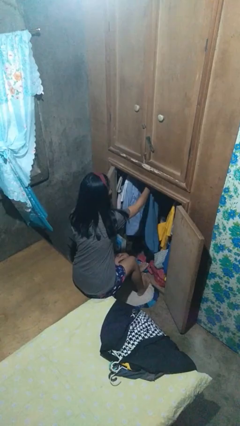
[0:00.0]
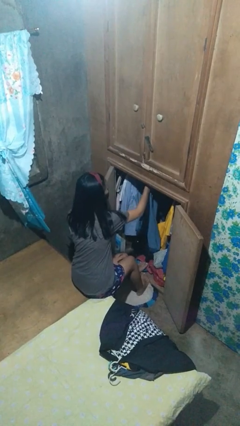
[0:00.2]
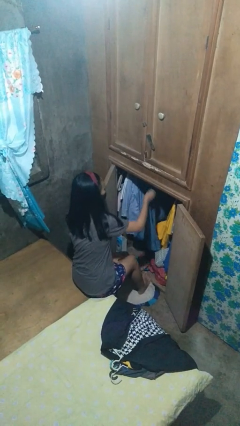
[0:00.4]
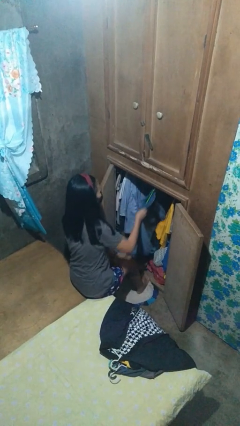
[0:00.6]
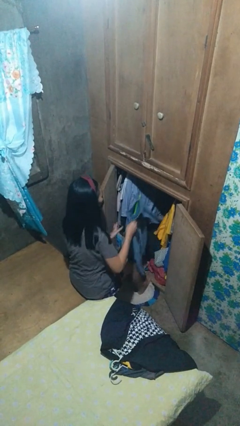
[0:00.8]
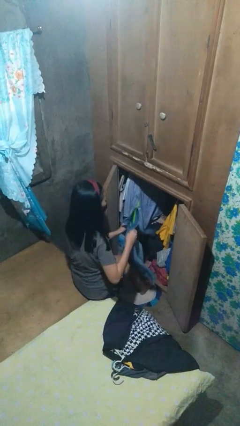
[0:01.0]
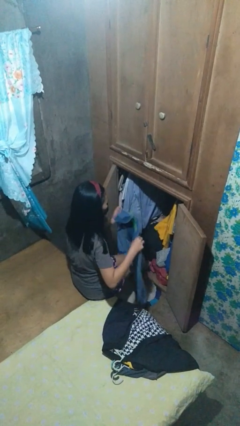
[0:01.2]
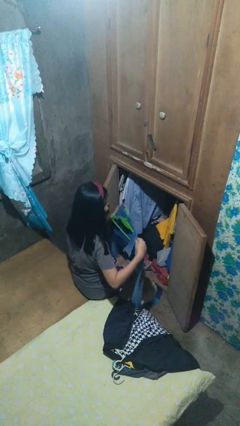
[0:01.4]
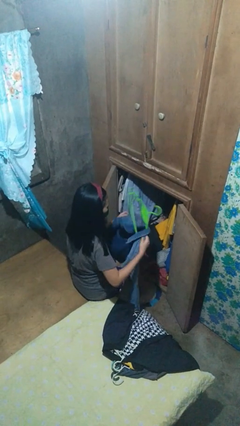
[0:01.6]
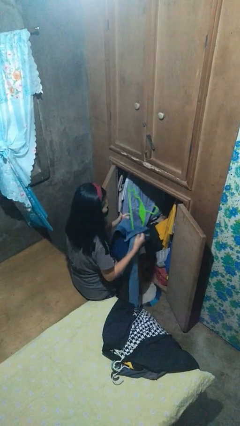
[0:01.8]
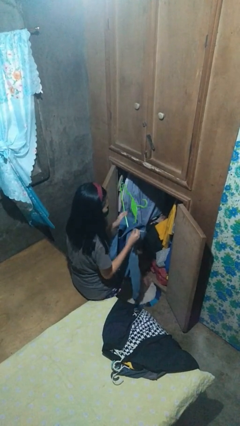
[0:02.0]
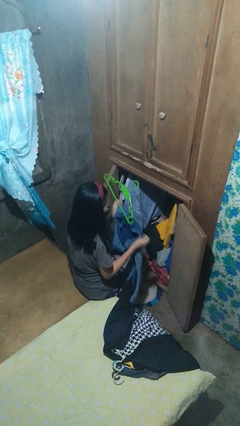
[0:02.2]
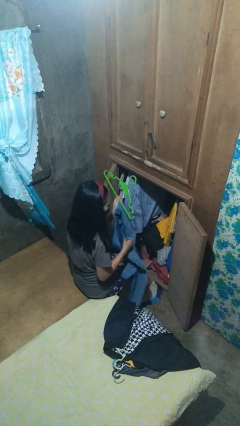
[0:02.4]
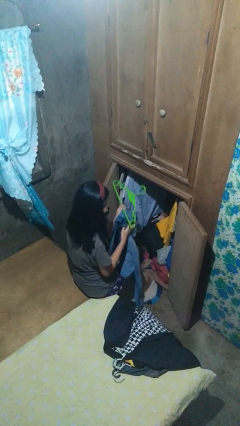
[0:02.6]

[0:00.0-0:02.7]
person takes clothes from closet

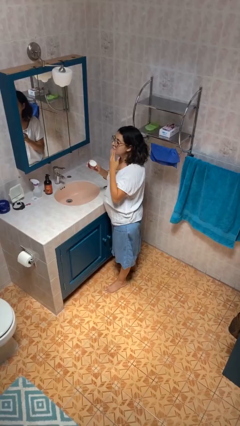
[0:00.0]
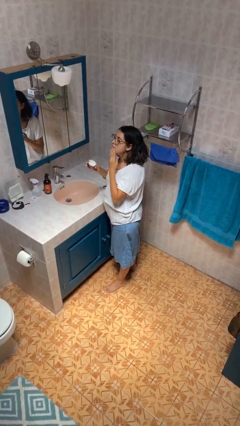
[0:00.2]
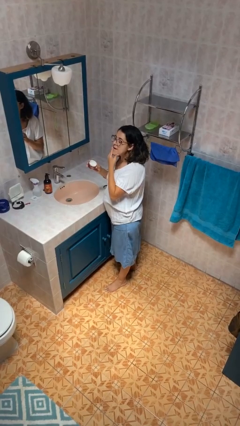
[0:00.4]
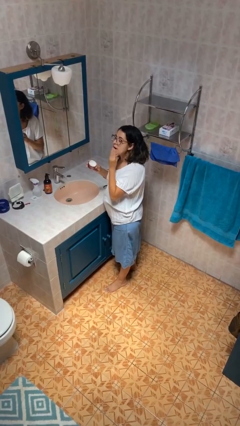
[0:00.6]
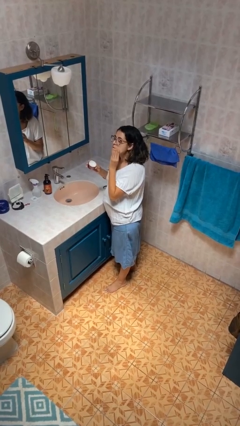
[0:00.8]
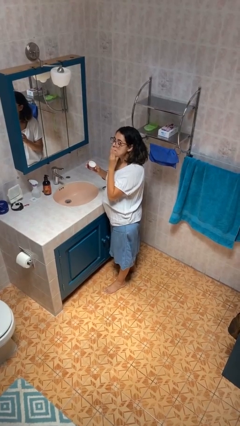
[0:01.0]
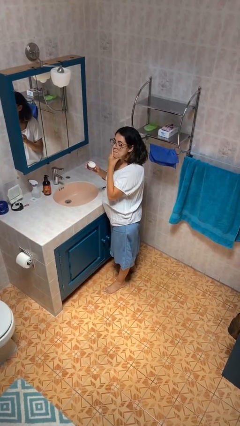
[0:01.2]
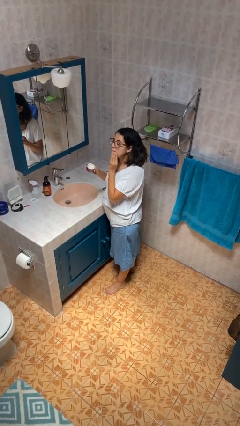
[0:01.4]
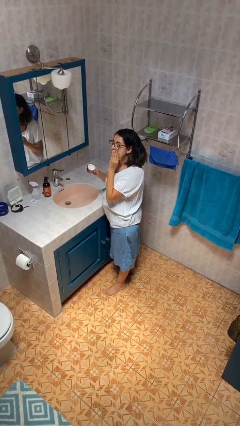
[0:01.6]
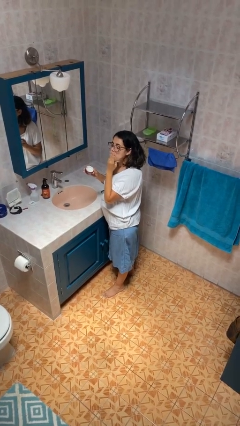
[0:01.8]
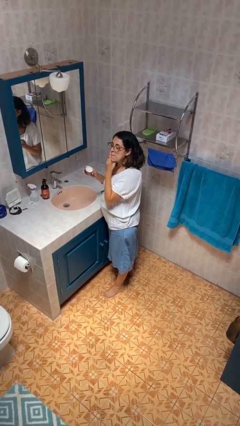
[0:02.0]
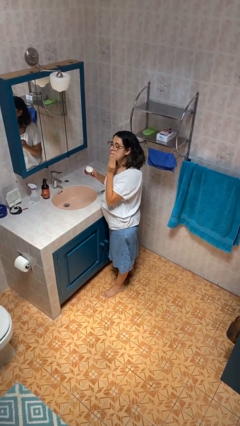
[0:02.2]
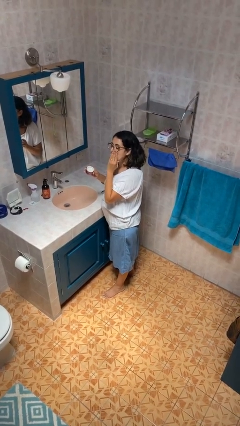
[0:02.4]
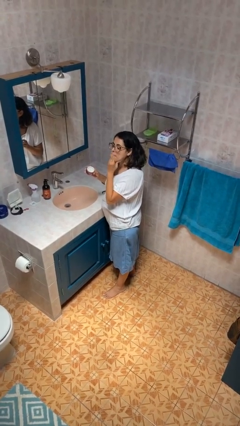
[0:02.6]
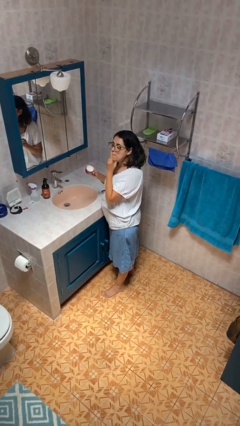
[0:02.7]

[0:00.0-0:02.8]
person applies facial moisturizer

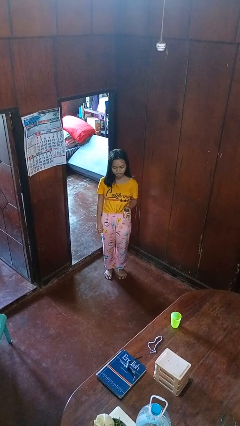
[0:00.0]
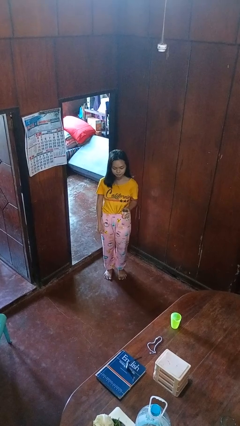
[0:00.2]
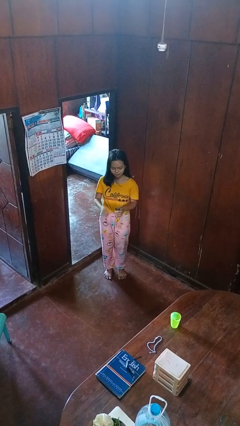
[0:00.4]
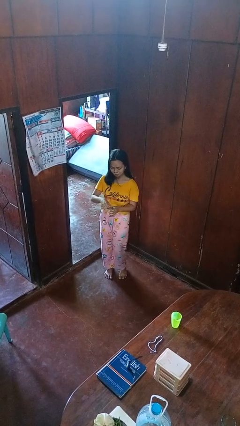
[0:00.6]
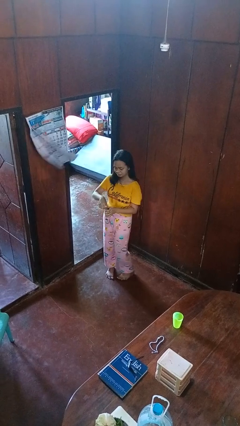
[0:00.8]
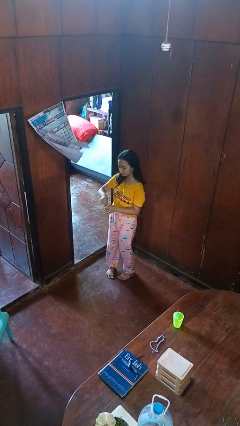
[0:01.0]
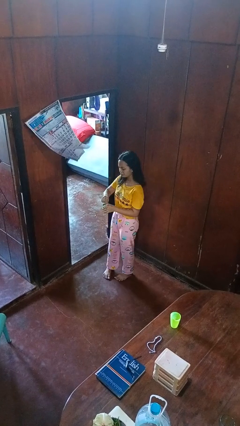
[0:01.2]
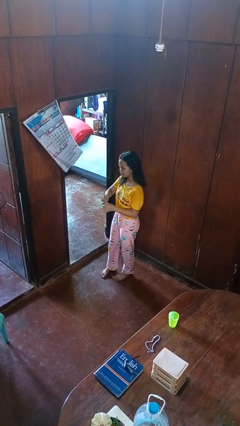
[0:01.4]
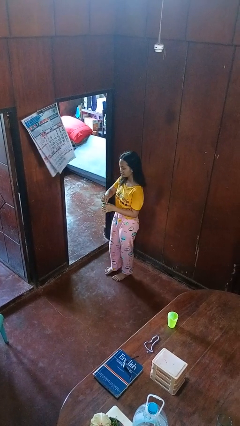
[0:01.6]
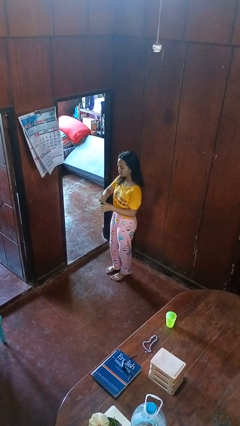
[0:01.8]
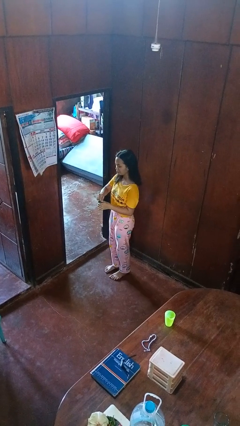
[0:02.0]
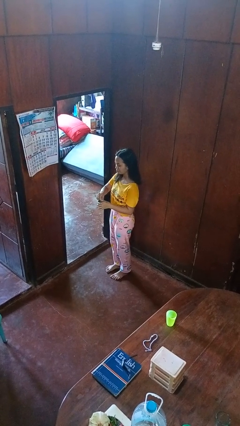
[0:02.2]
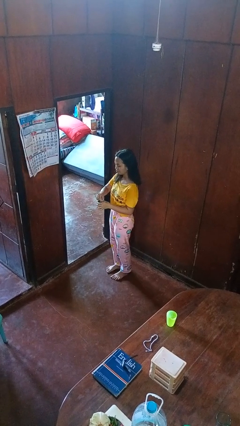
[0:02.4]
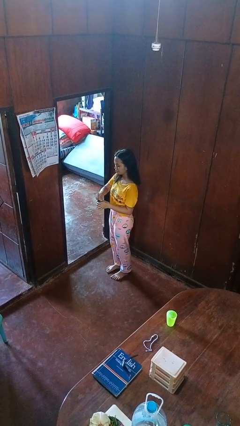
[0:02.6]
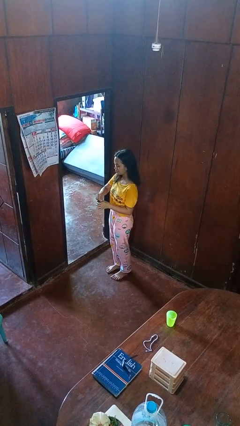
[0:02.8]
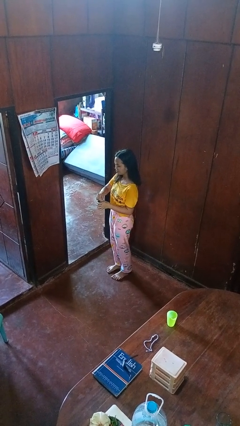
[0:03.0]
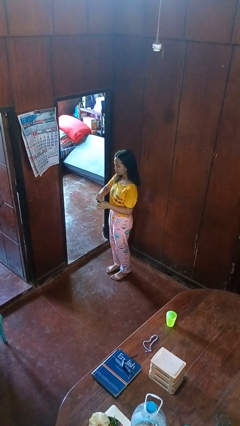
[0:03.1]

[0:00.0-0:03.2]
person opens beverage can

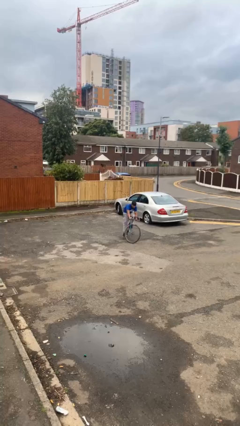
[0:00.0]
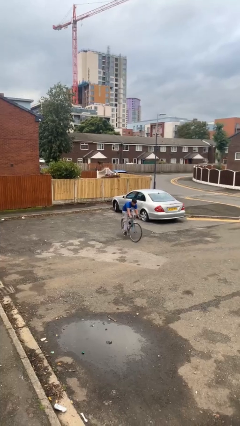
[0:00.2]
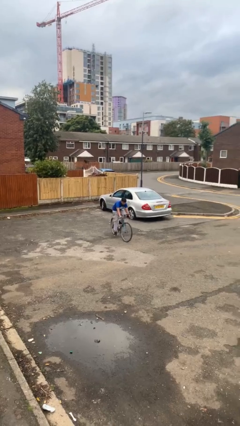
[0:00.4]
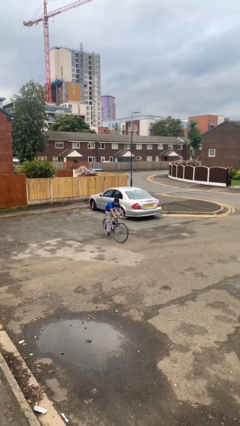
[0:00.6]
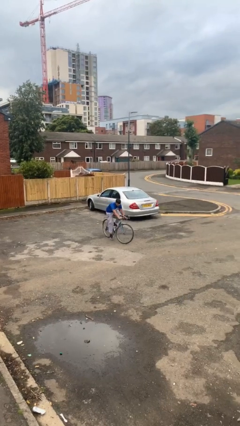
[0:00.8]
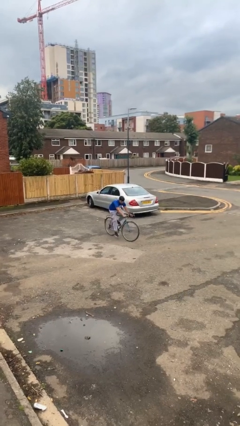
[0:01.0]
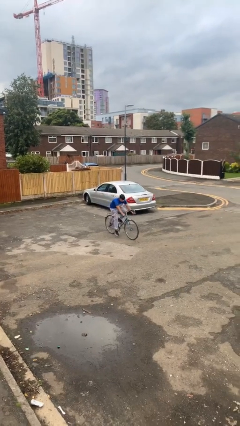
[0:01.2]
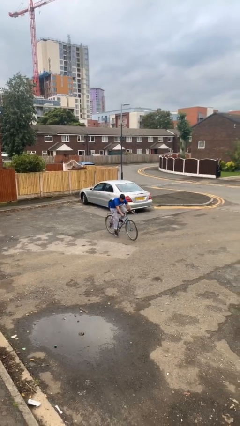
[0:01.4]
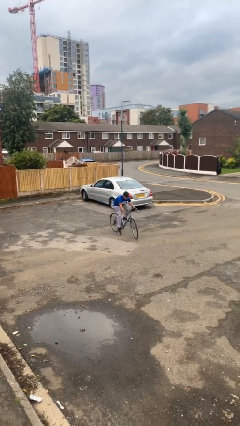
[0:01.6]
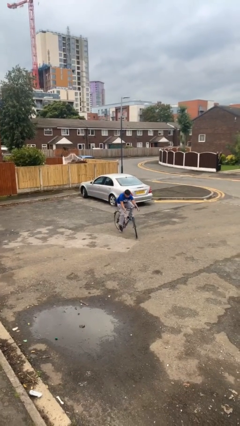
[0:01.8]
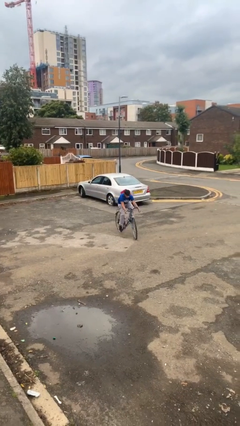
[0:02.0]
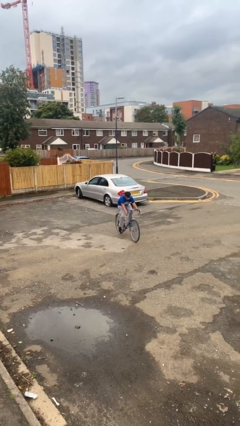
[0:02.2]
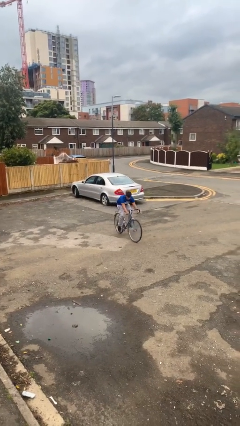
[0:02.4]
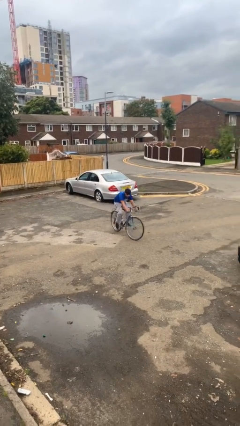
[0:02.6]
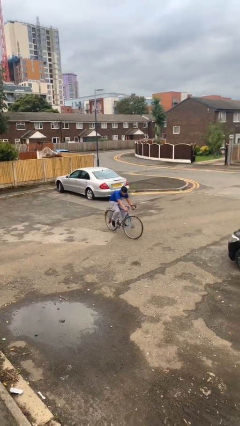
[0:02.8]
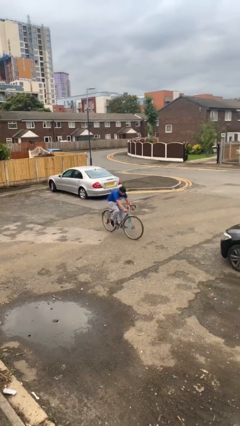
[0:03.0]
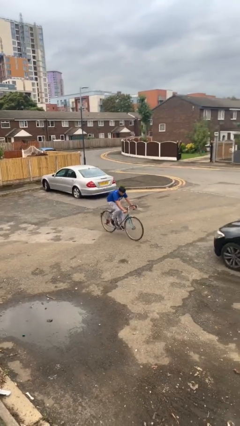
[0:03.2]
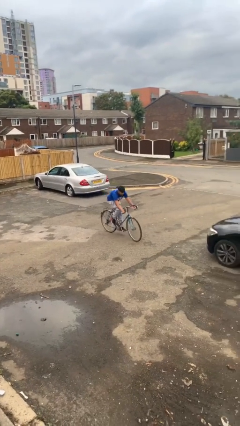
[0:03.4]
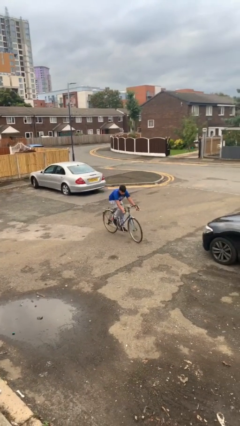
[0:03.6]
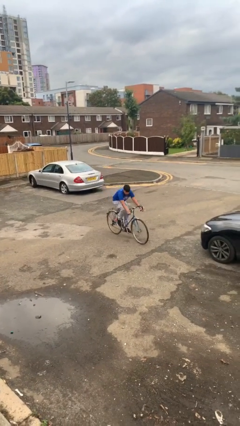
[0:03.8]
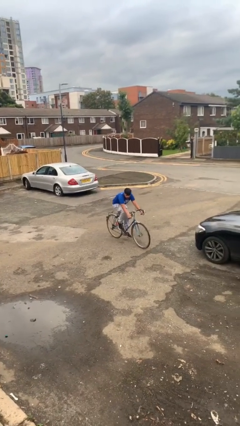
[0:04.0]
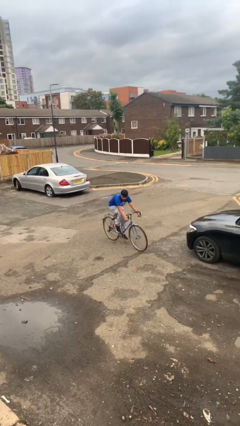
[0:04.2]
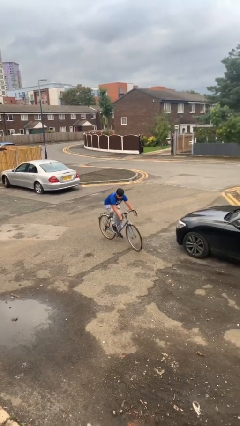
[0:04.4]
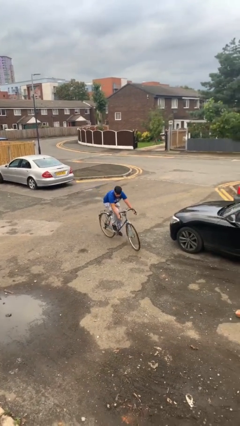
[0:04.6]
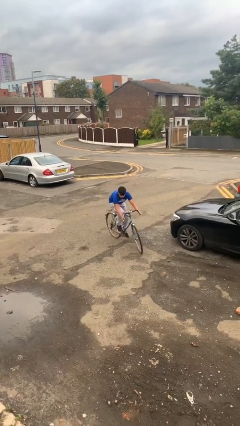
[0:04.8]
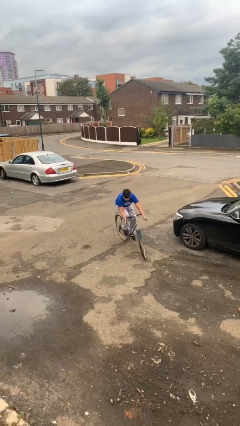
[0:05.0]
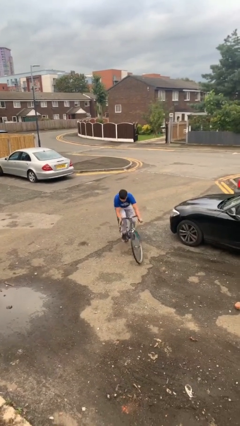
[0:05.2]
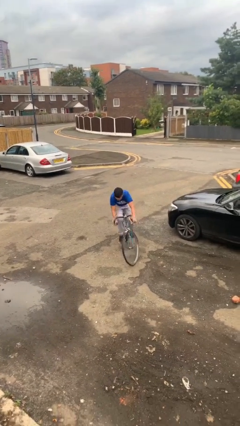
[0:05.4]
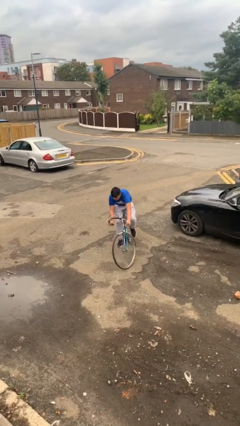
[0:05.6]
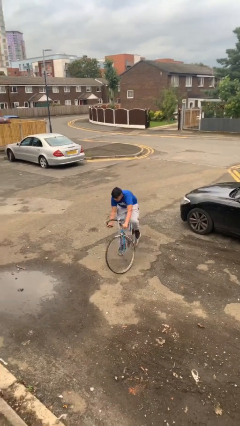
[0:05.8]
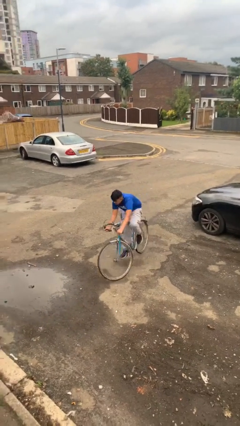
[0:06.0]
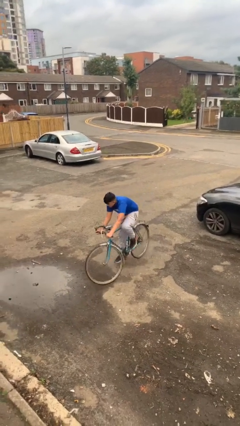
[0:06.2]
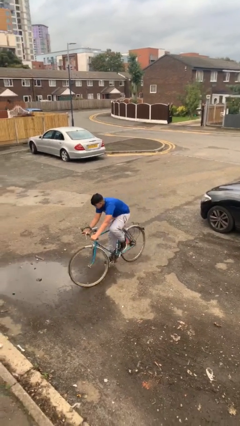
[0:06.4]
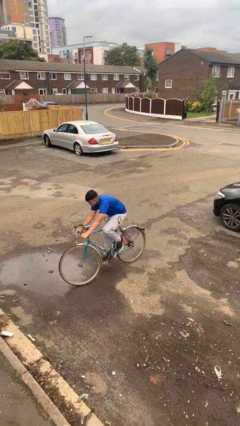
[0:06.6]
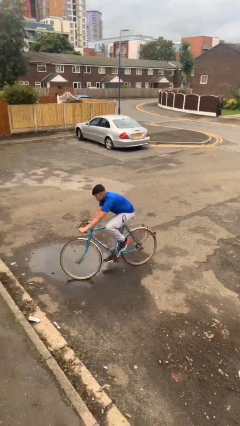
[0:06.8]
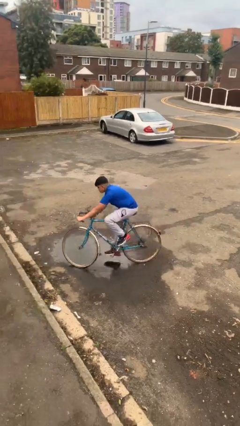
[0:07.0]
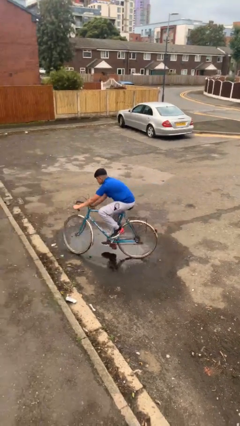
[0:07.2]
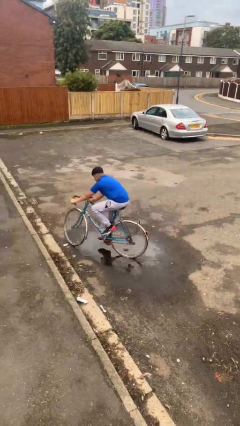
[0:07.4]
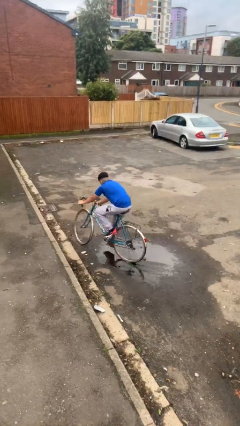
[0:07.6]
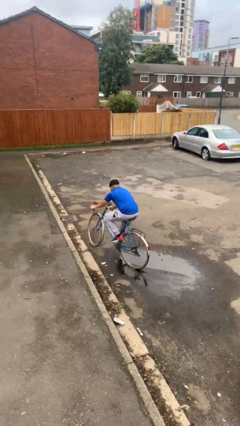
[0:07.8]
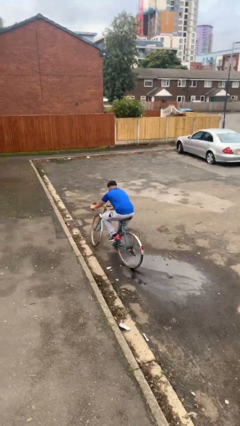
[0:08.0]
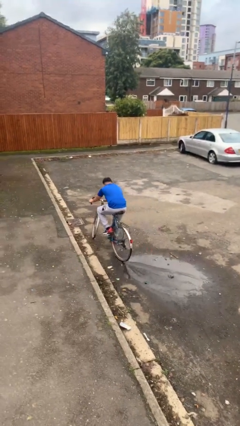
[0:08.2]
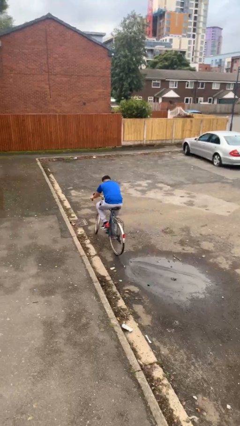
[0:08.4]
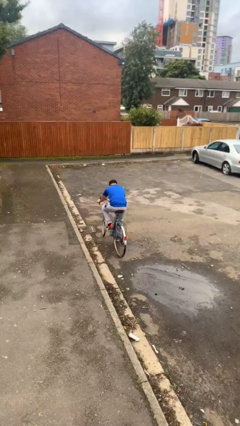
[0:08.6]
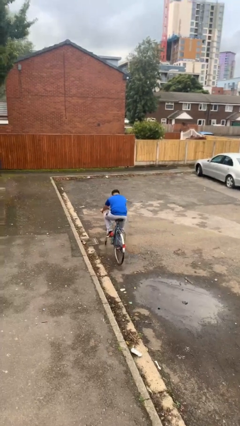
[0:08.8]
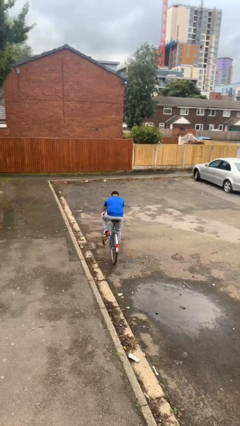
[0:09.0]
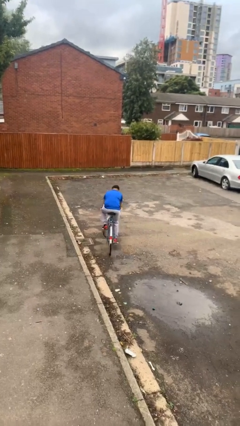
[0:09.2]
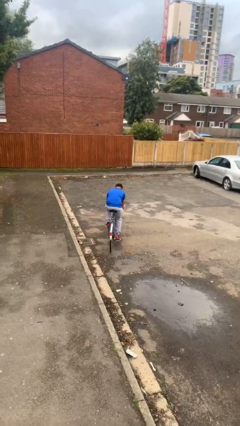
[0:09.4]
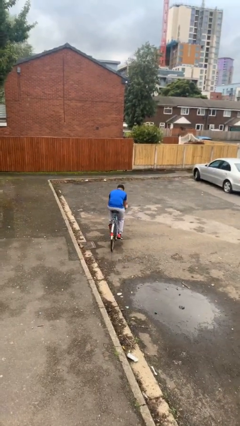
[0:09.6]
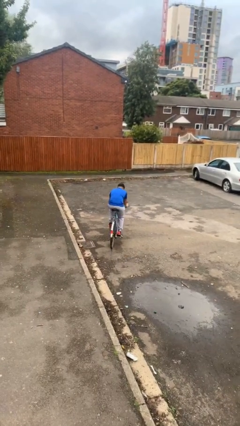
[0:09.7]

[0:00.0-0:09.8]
person rides bicycle
